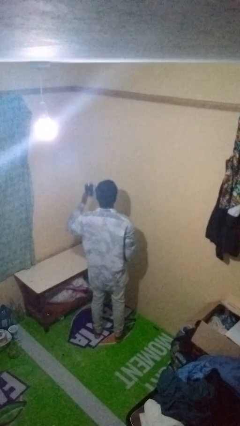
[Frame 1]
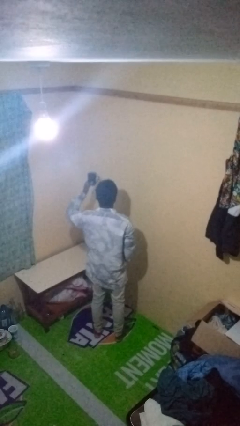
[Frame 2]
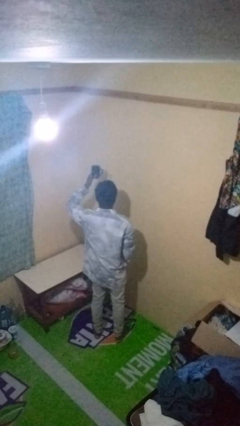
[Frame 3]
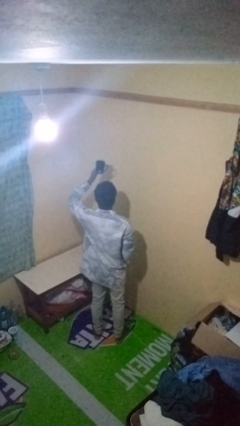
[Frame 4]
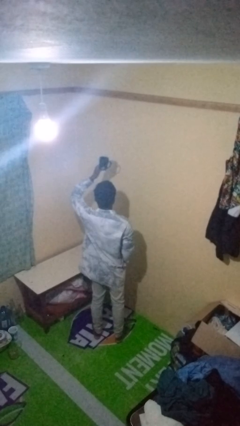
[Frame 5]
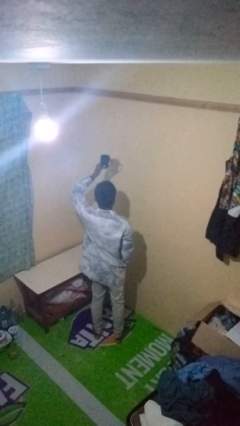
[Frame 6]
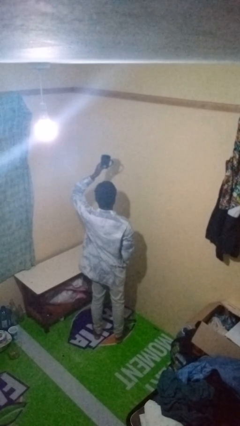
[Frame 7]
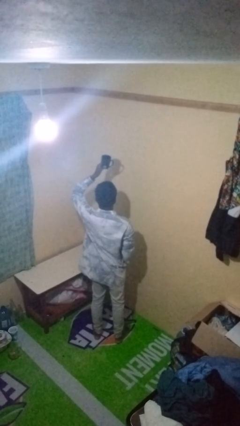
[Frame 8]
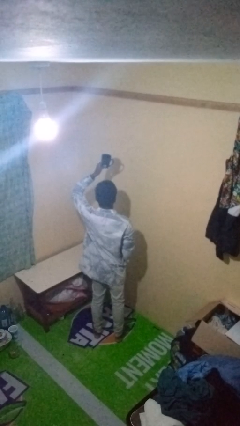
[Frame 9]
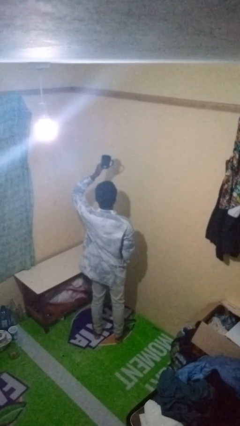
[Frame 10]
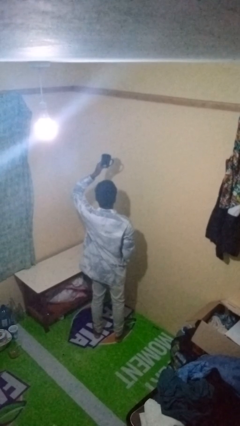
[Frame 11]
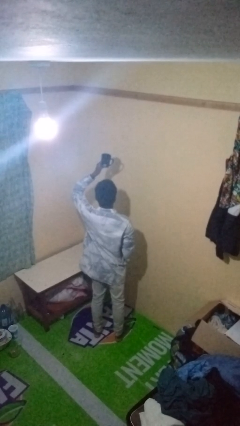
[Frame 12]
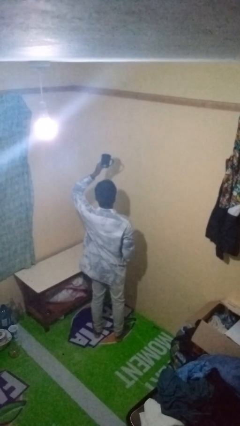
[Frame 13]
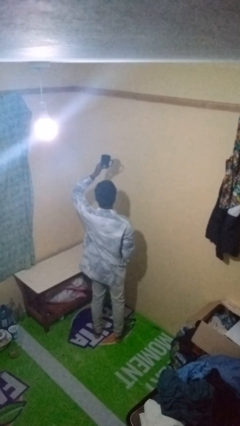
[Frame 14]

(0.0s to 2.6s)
person holds object above head

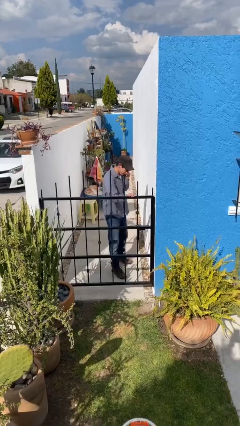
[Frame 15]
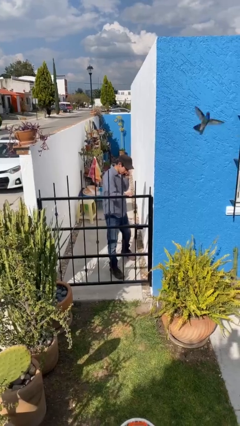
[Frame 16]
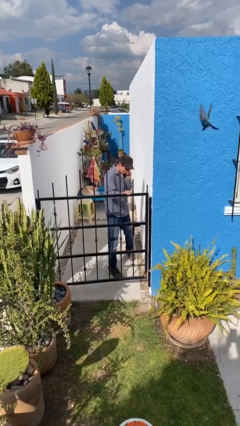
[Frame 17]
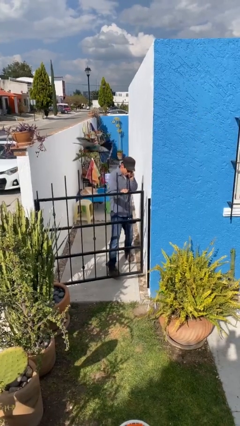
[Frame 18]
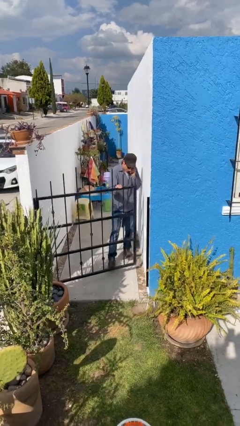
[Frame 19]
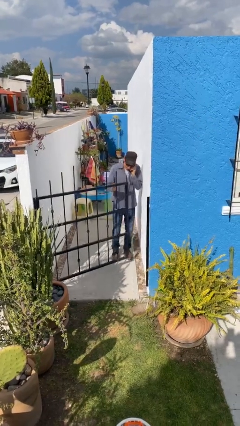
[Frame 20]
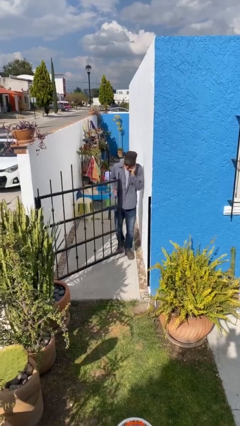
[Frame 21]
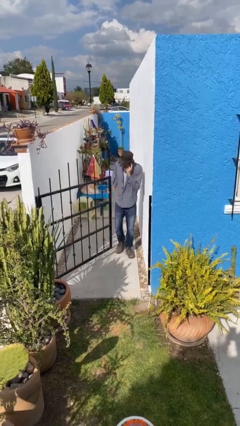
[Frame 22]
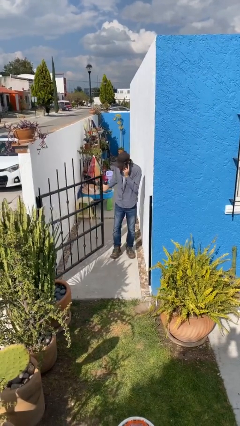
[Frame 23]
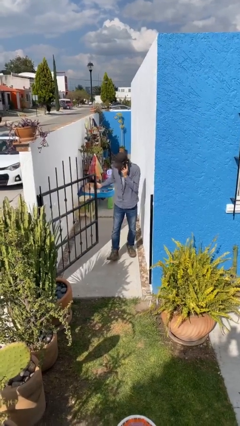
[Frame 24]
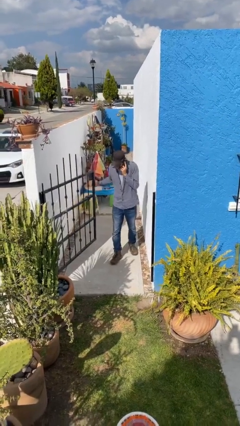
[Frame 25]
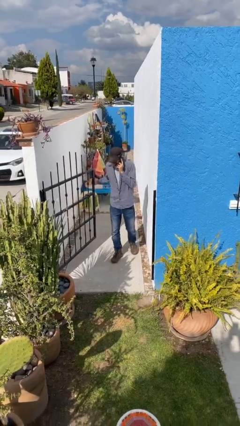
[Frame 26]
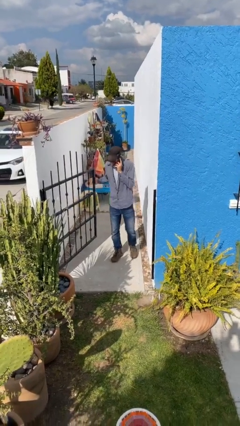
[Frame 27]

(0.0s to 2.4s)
person opens facility door

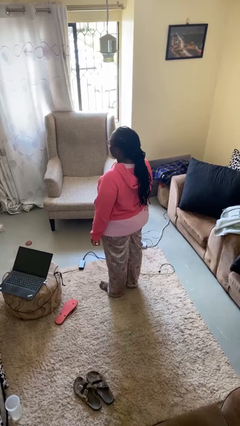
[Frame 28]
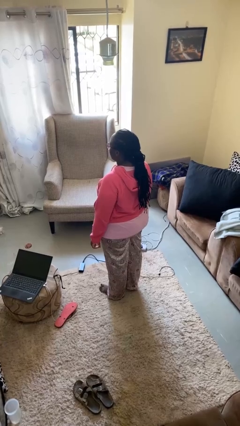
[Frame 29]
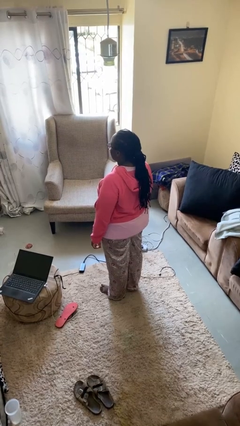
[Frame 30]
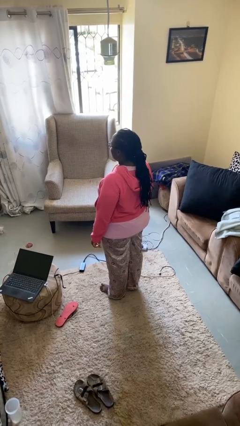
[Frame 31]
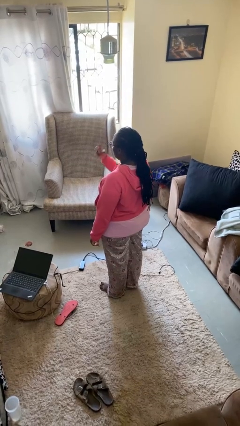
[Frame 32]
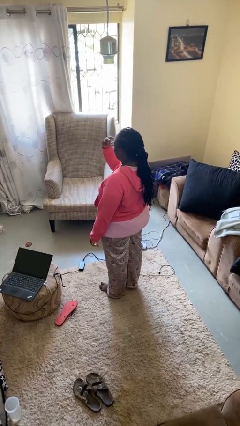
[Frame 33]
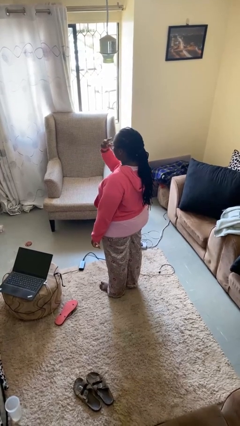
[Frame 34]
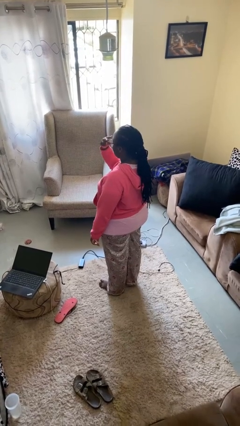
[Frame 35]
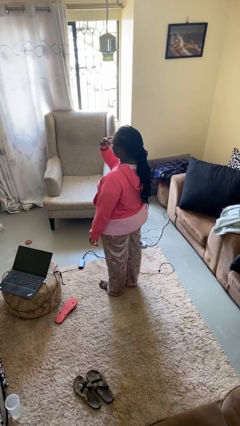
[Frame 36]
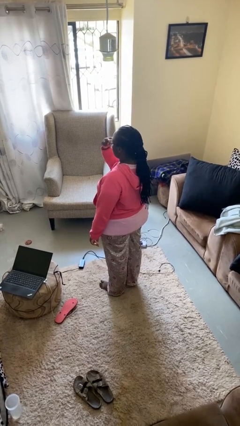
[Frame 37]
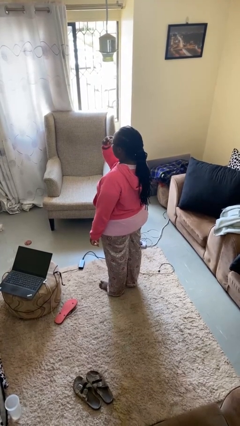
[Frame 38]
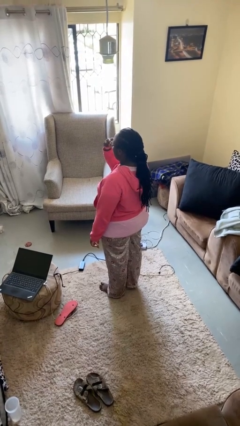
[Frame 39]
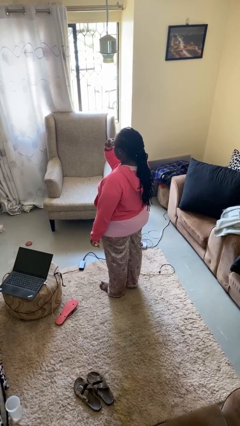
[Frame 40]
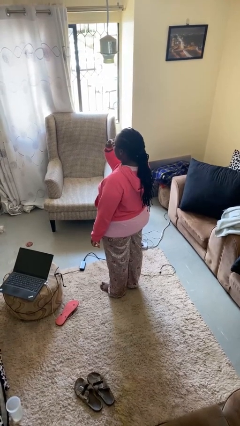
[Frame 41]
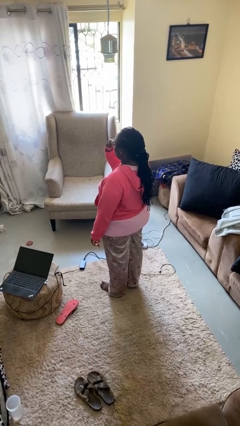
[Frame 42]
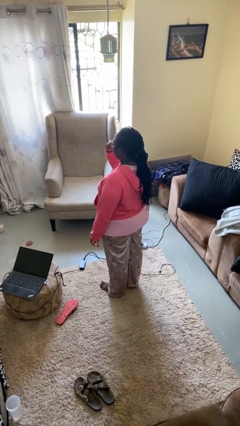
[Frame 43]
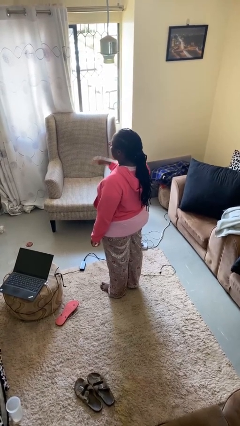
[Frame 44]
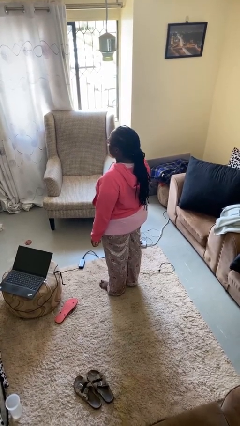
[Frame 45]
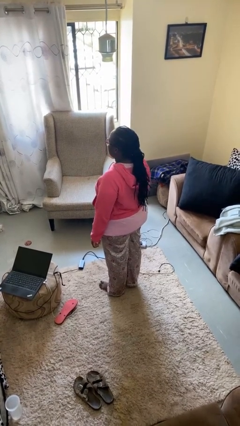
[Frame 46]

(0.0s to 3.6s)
person gestures watch closely

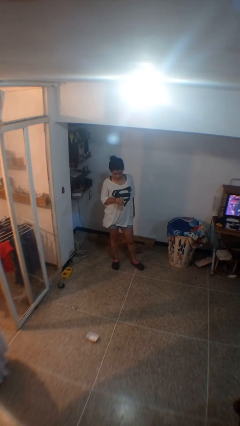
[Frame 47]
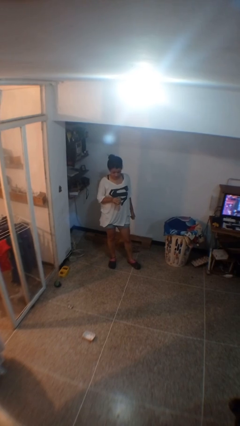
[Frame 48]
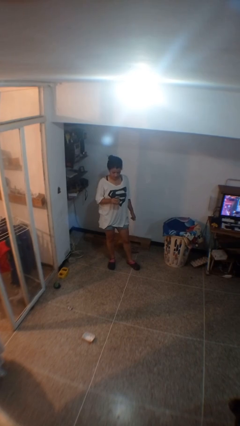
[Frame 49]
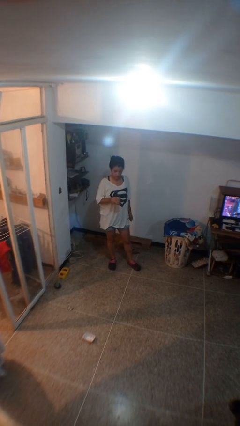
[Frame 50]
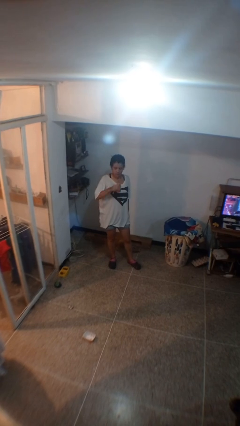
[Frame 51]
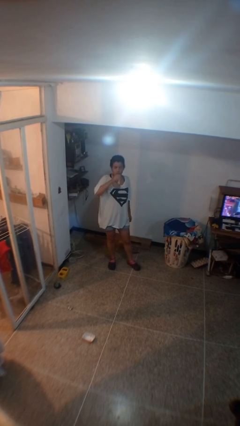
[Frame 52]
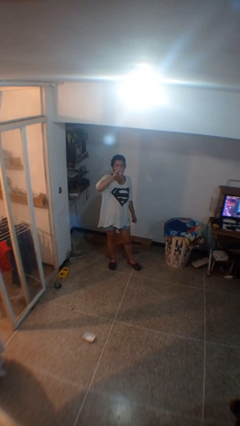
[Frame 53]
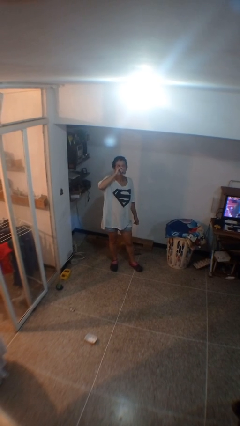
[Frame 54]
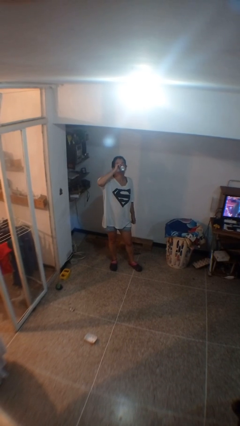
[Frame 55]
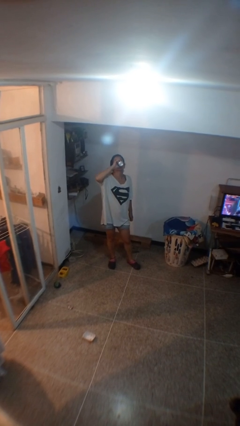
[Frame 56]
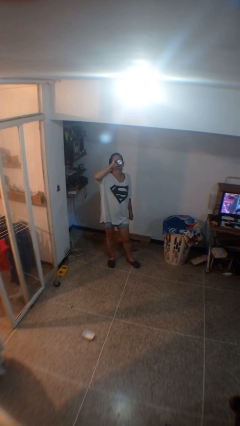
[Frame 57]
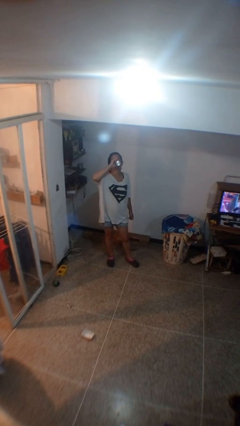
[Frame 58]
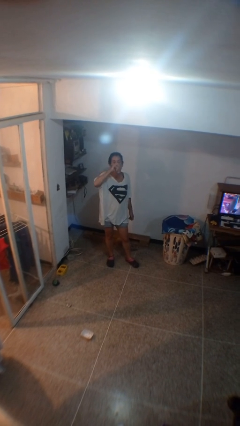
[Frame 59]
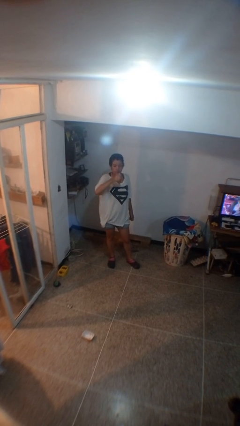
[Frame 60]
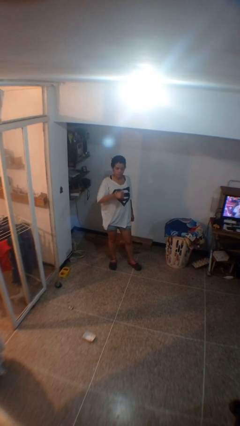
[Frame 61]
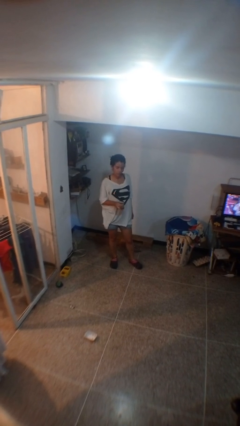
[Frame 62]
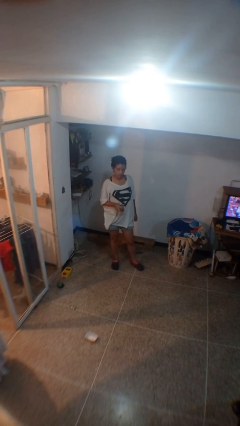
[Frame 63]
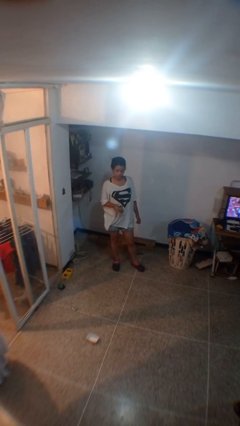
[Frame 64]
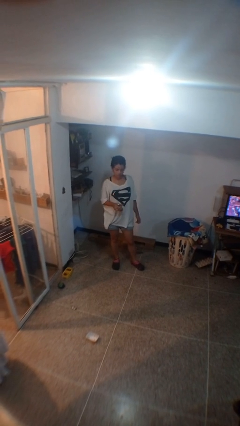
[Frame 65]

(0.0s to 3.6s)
person drinks from beverage can

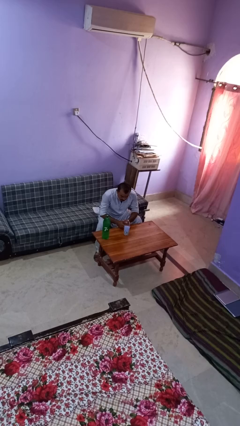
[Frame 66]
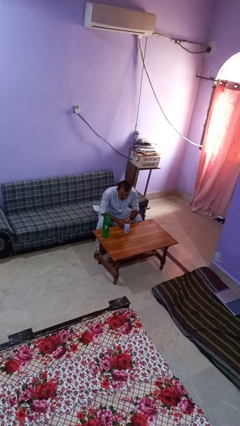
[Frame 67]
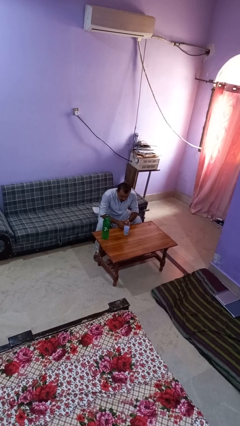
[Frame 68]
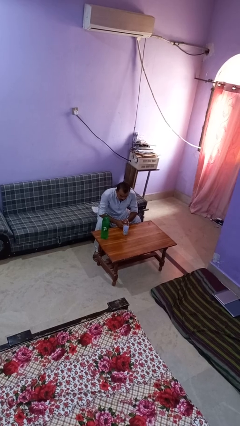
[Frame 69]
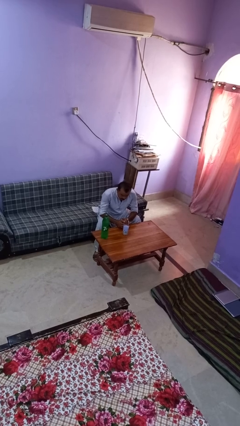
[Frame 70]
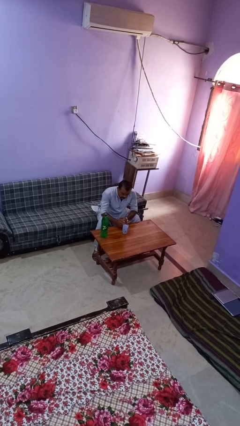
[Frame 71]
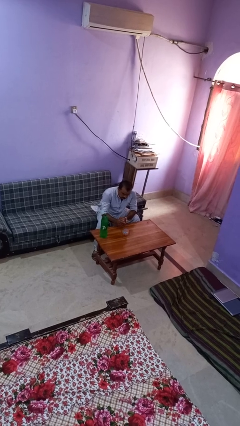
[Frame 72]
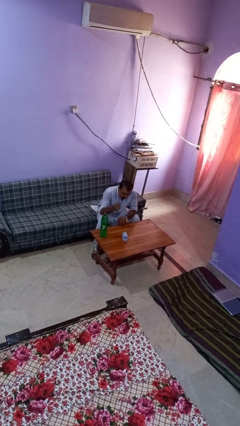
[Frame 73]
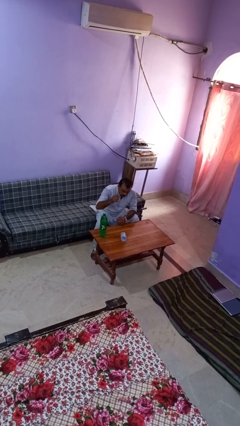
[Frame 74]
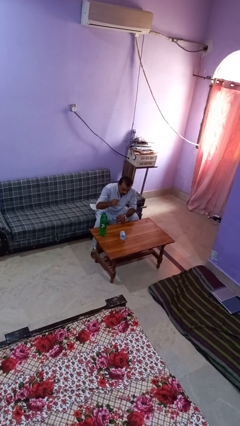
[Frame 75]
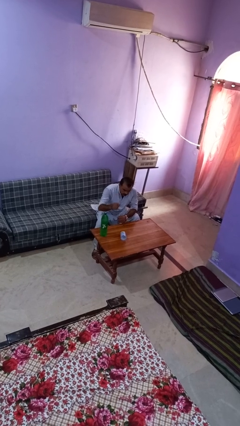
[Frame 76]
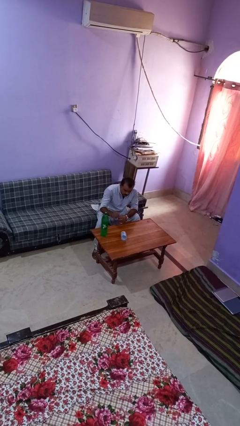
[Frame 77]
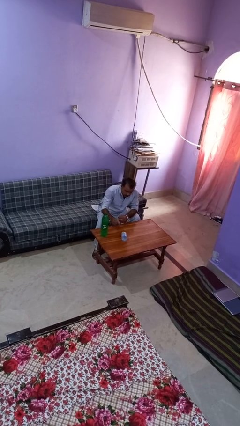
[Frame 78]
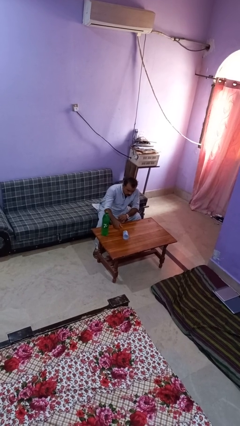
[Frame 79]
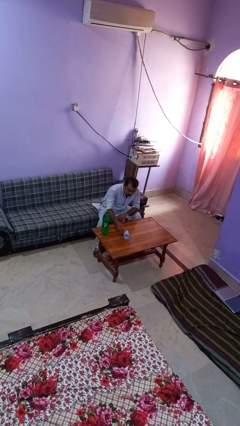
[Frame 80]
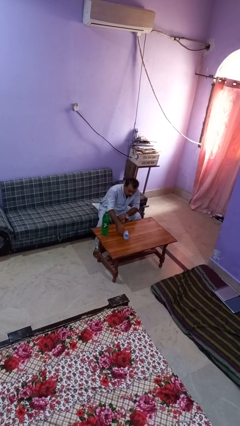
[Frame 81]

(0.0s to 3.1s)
person knocks over glass

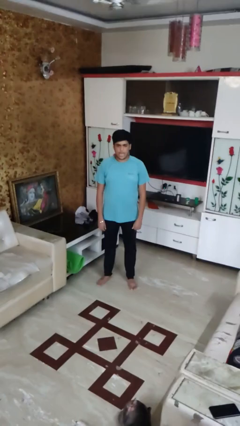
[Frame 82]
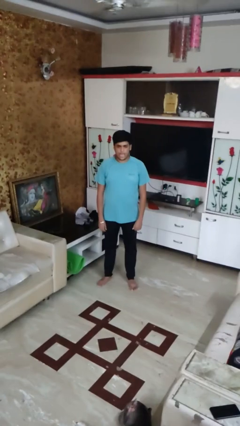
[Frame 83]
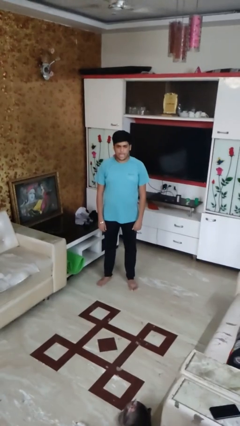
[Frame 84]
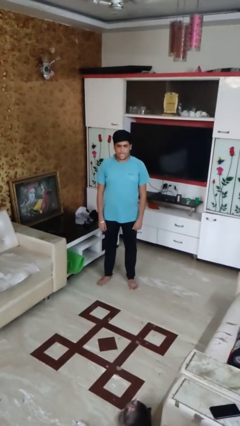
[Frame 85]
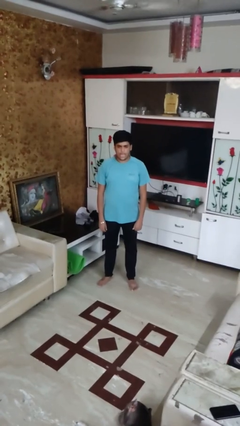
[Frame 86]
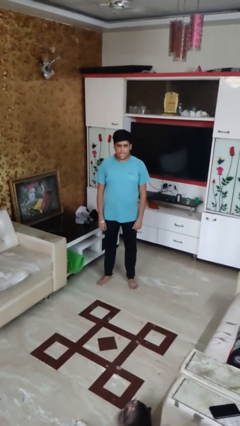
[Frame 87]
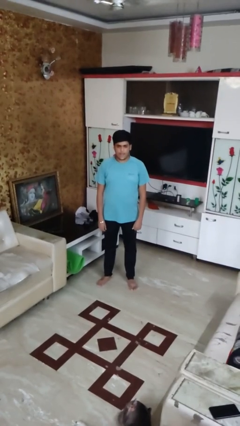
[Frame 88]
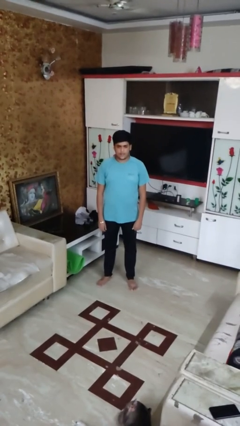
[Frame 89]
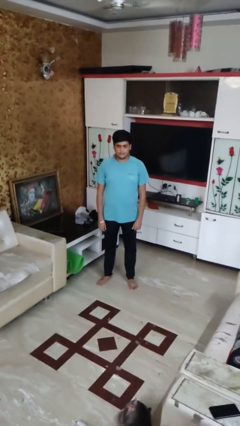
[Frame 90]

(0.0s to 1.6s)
person sticks out tongue

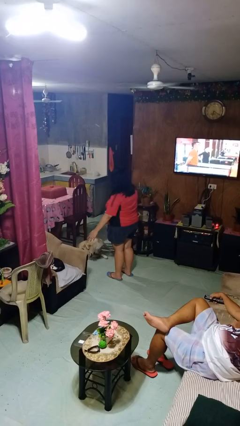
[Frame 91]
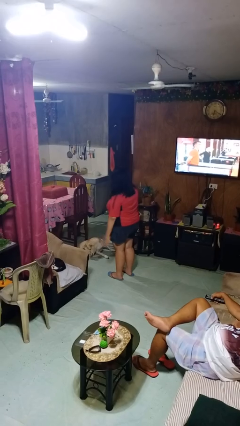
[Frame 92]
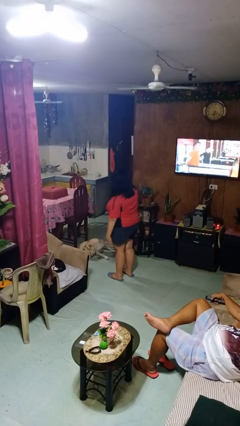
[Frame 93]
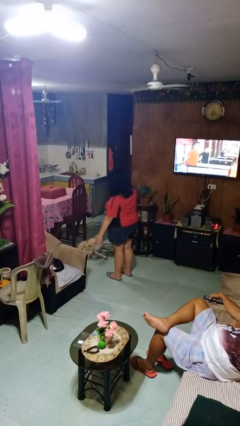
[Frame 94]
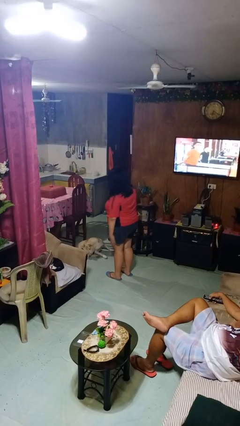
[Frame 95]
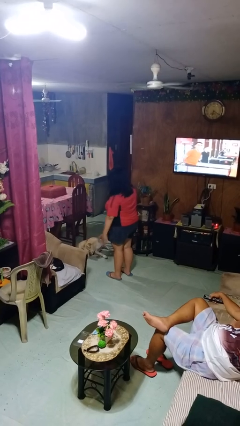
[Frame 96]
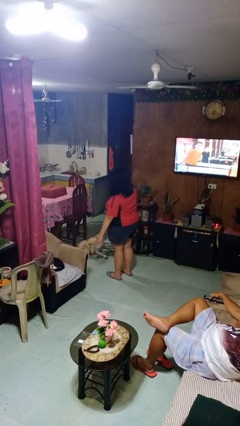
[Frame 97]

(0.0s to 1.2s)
person slaps hands on thighs
